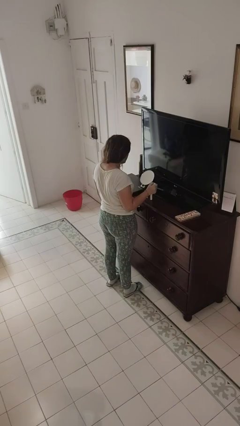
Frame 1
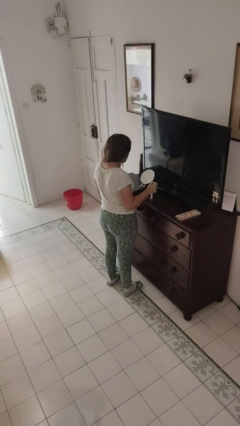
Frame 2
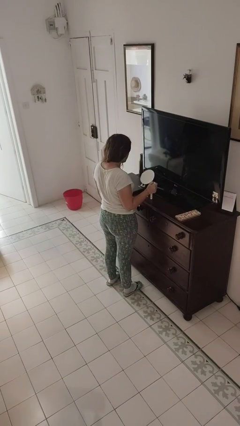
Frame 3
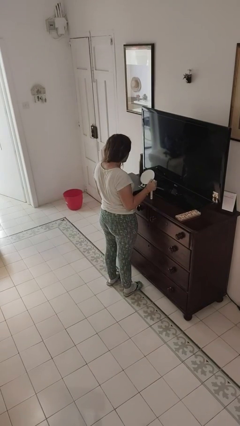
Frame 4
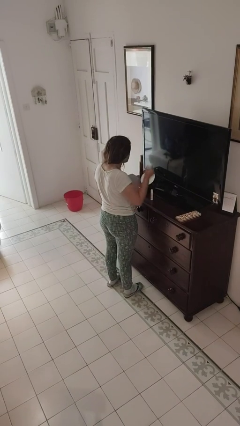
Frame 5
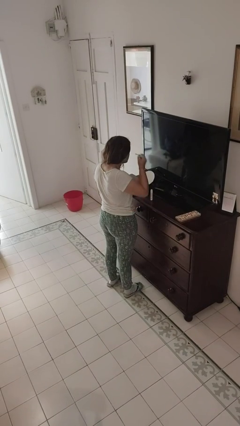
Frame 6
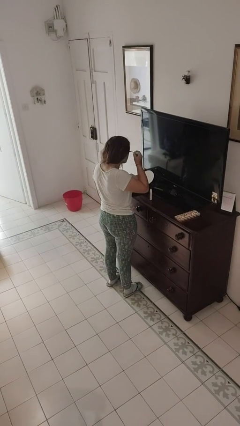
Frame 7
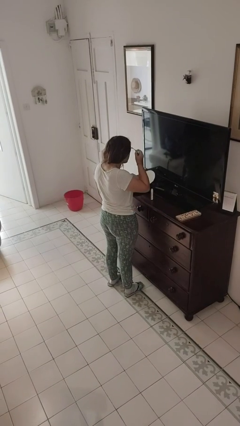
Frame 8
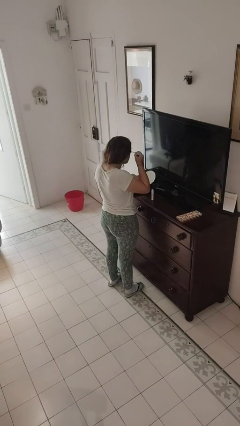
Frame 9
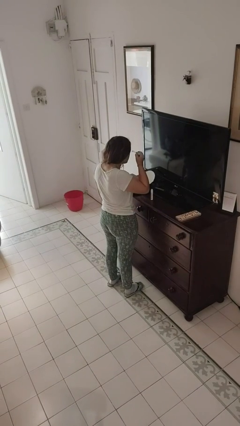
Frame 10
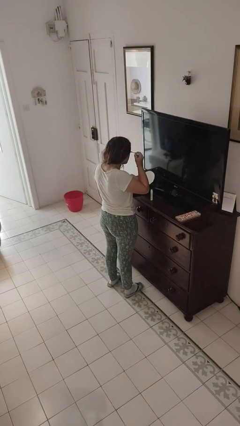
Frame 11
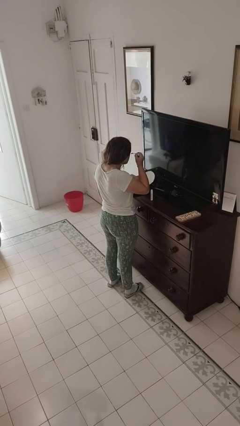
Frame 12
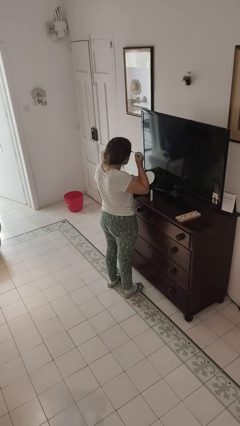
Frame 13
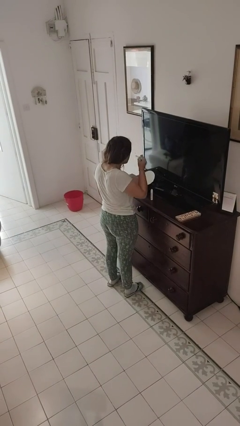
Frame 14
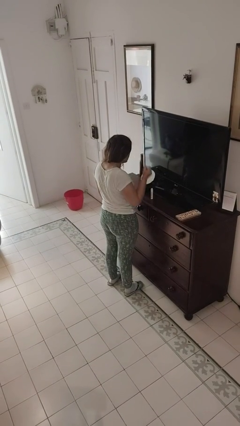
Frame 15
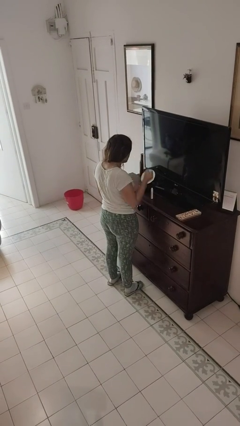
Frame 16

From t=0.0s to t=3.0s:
person applies eye makeup

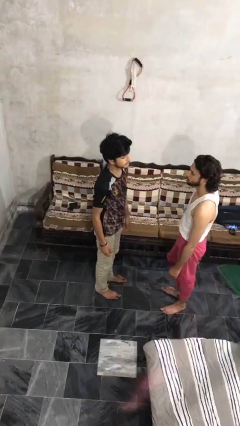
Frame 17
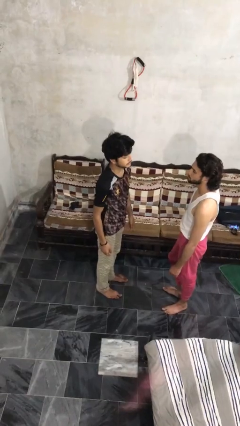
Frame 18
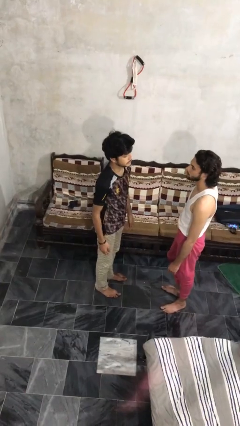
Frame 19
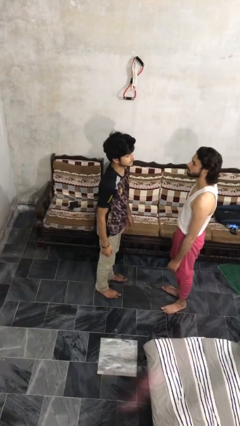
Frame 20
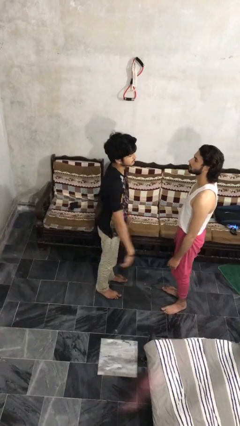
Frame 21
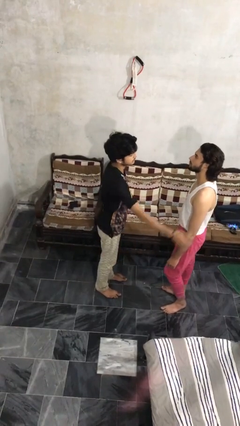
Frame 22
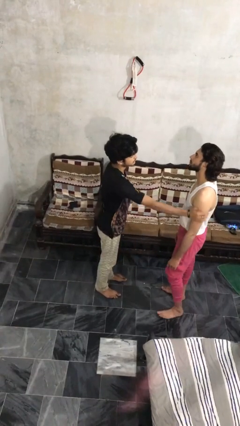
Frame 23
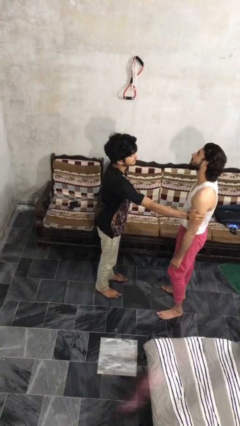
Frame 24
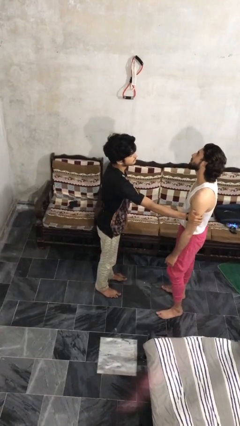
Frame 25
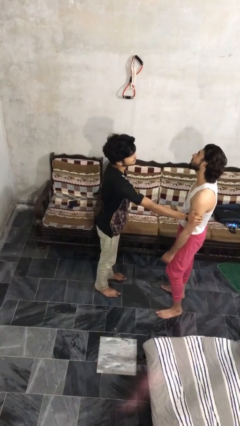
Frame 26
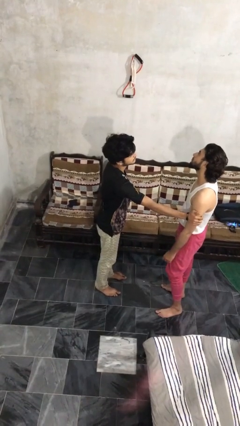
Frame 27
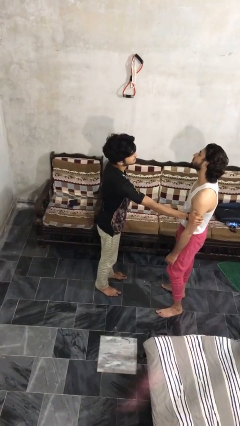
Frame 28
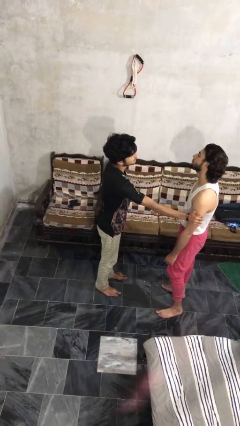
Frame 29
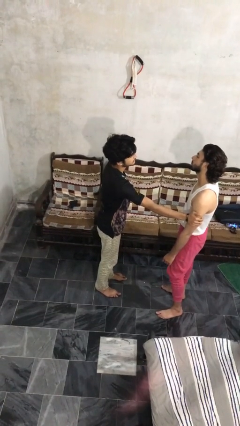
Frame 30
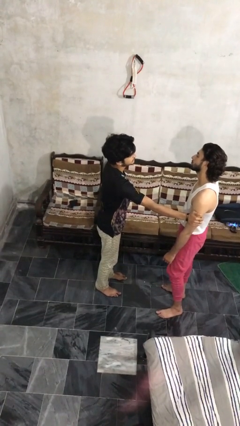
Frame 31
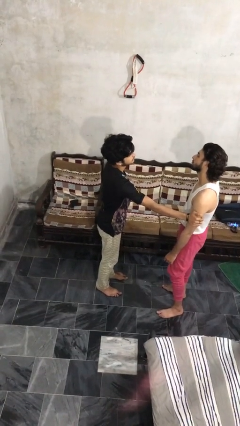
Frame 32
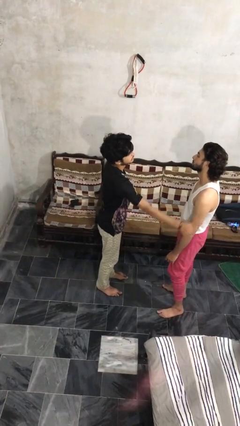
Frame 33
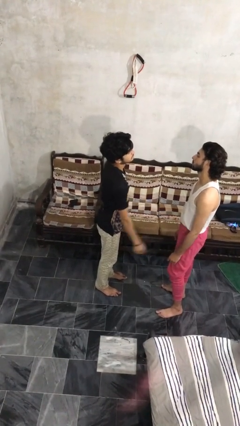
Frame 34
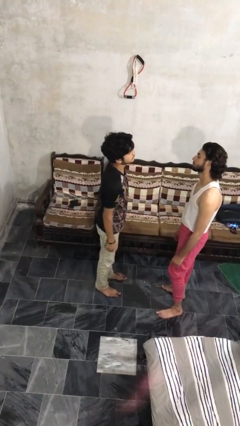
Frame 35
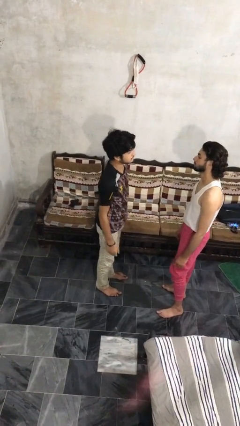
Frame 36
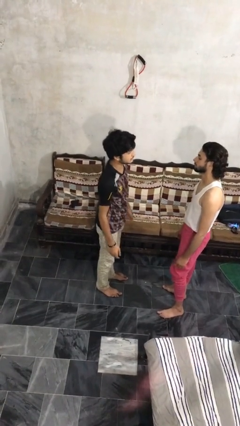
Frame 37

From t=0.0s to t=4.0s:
person grabs person by bicep

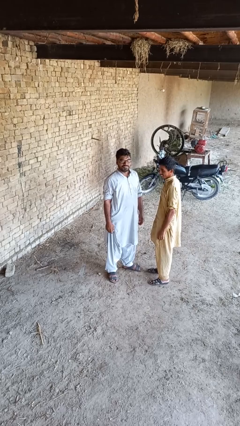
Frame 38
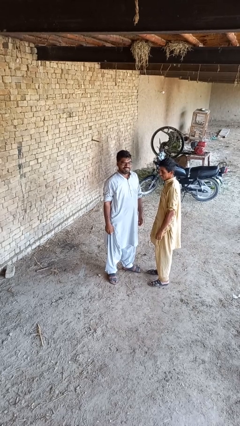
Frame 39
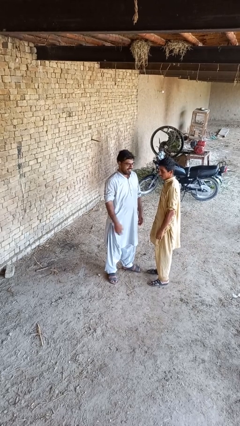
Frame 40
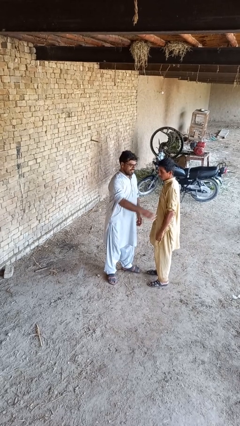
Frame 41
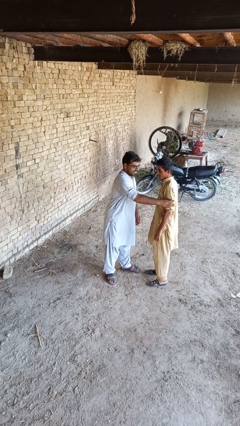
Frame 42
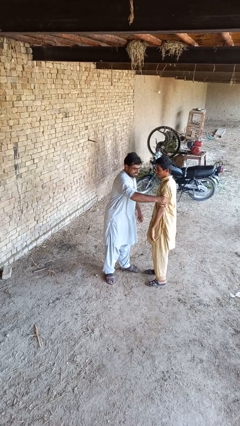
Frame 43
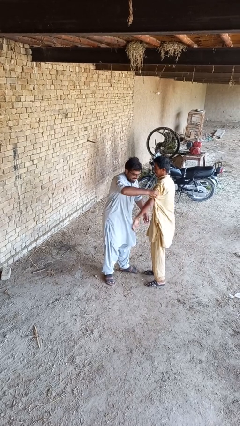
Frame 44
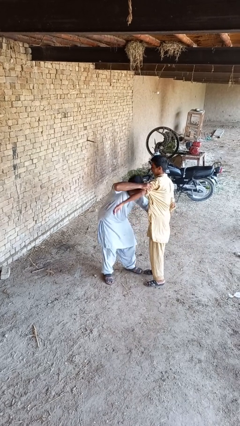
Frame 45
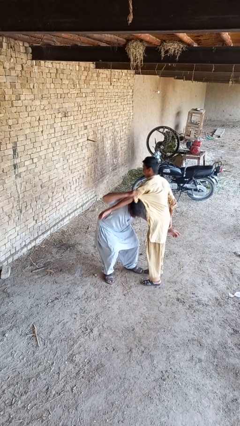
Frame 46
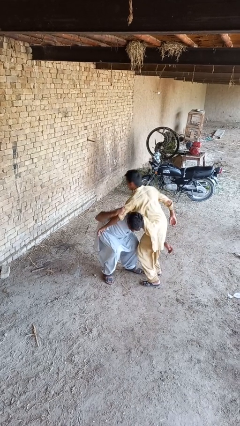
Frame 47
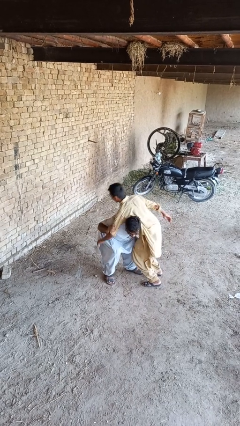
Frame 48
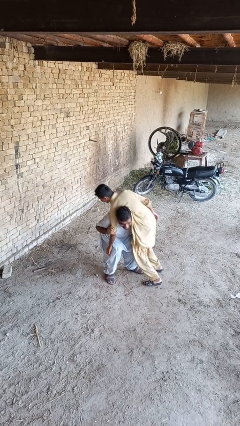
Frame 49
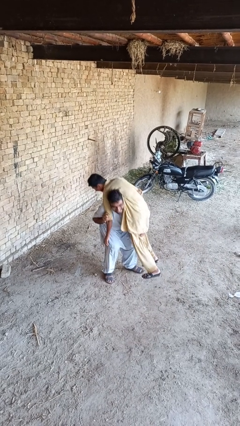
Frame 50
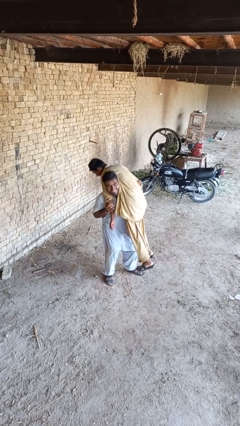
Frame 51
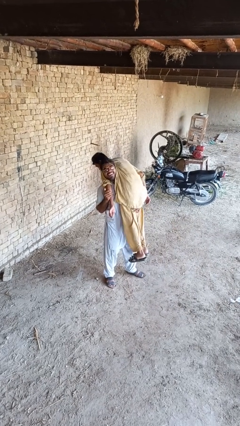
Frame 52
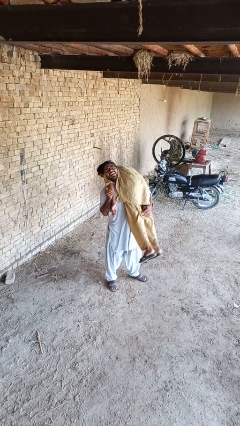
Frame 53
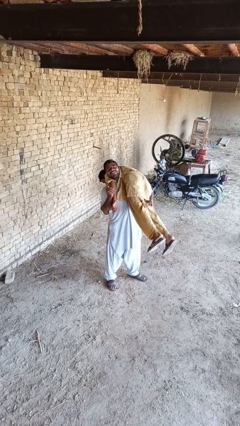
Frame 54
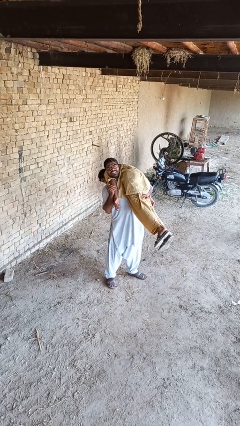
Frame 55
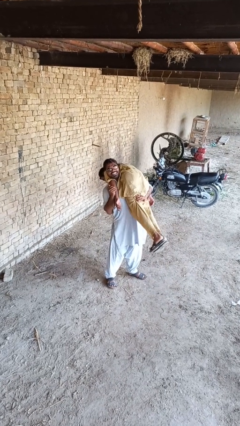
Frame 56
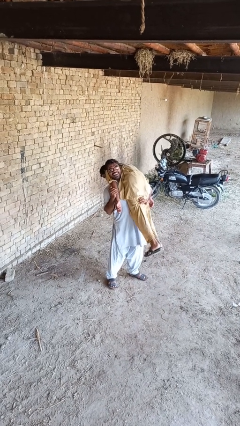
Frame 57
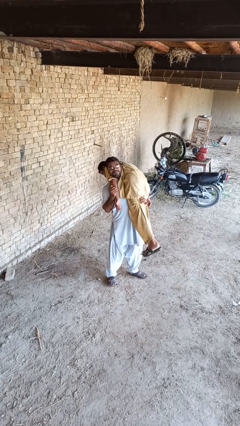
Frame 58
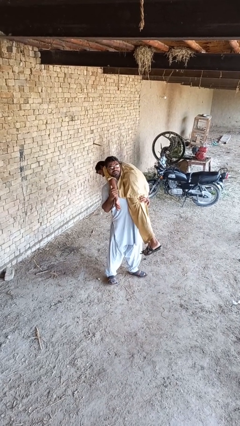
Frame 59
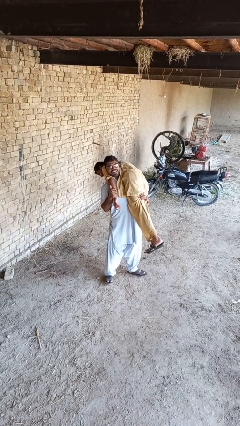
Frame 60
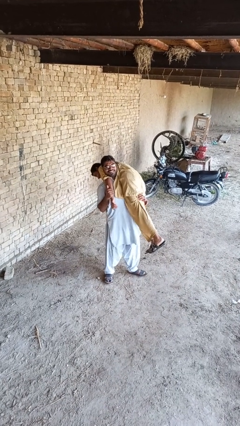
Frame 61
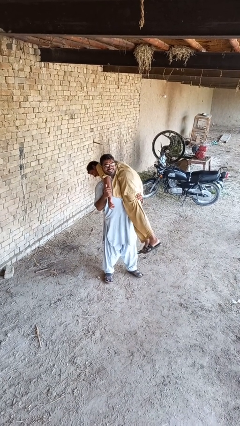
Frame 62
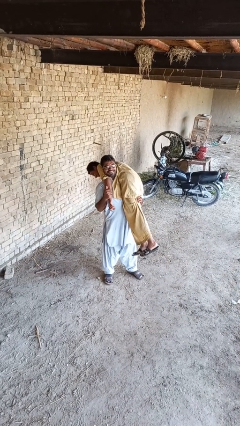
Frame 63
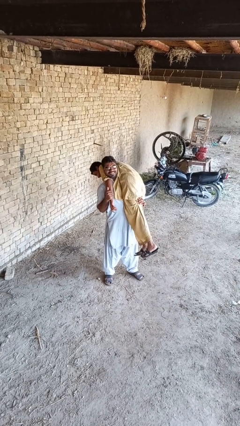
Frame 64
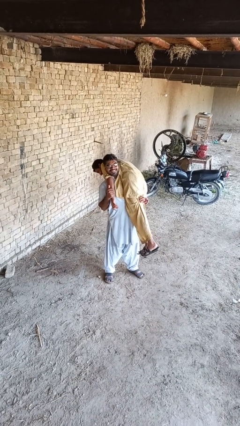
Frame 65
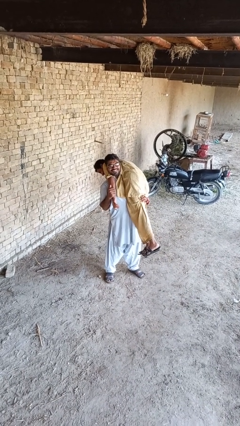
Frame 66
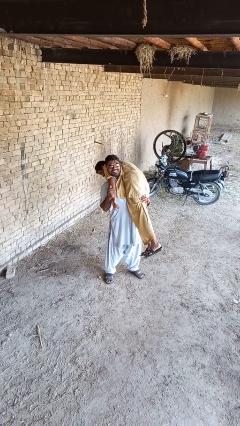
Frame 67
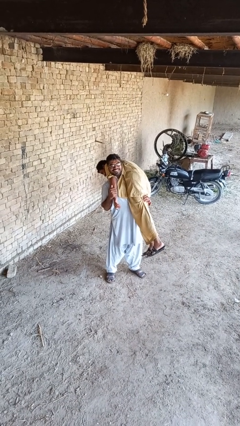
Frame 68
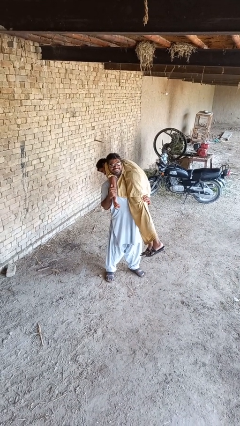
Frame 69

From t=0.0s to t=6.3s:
person carries person over shoulder

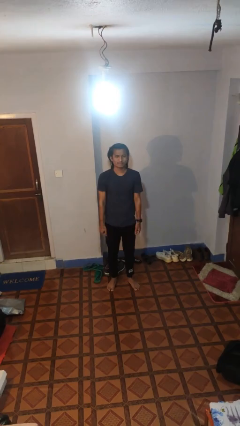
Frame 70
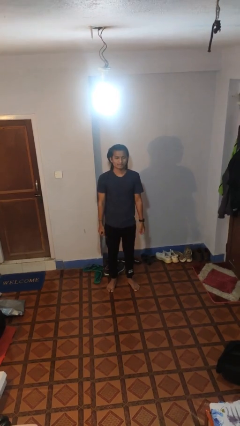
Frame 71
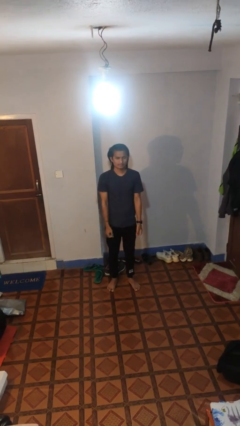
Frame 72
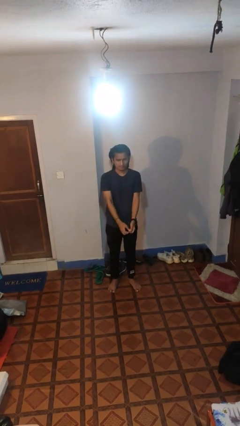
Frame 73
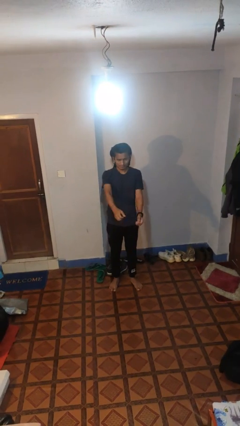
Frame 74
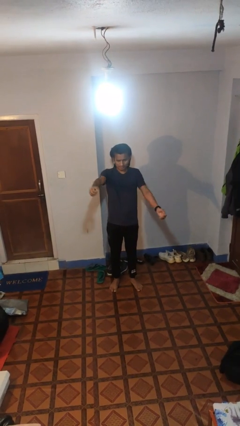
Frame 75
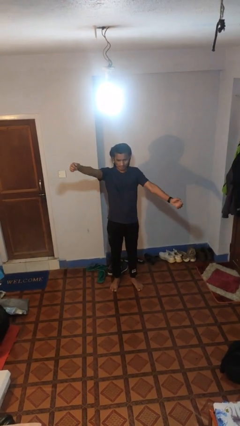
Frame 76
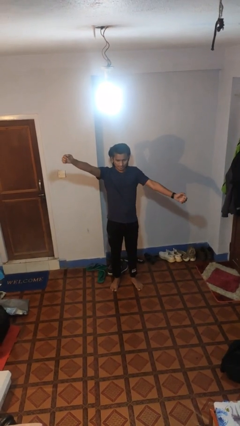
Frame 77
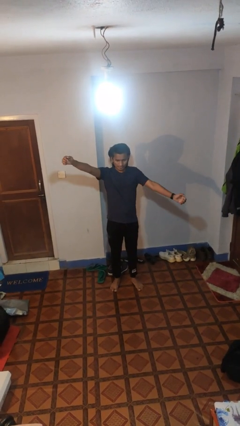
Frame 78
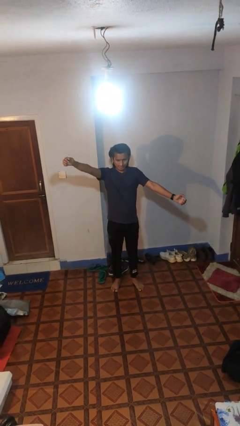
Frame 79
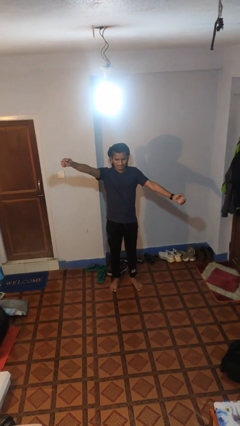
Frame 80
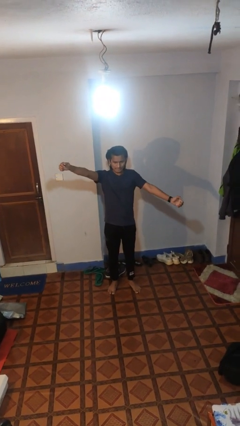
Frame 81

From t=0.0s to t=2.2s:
person gestures zoom in

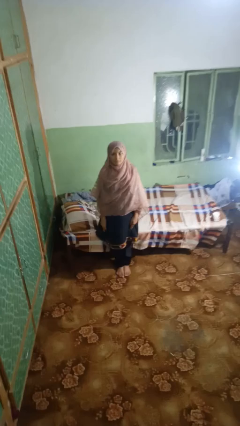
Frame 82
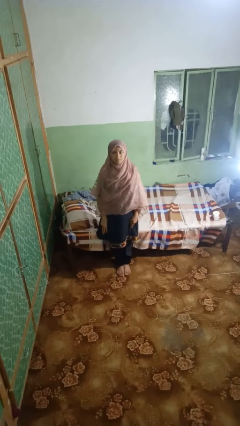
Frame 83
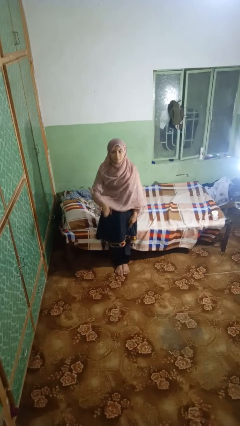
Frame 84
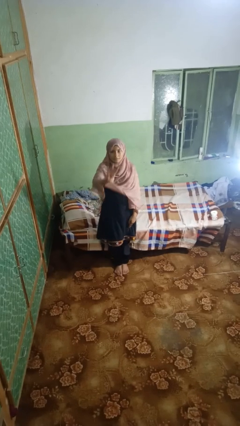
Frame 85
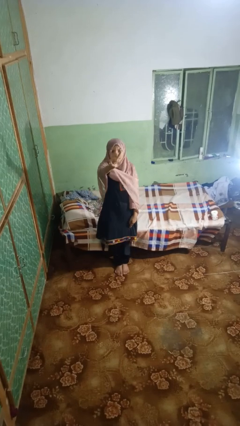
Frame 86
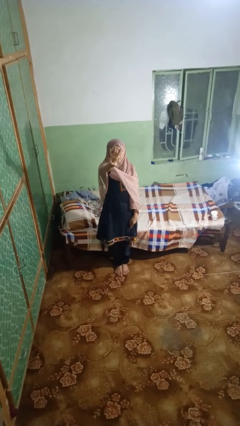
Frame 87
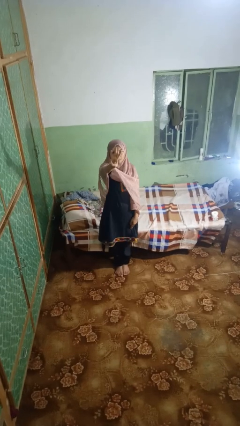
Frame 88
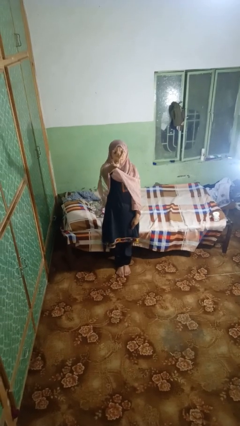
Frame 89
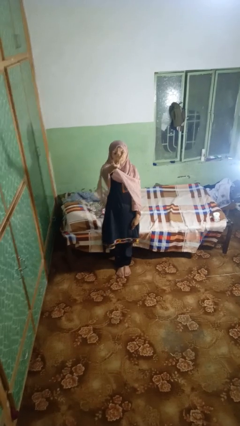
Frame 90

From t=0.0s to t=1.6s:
person gestures number three

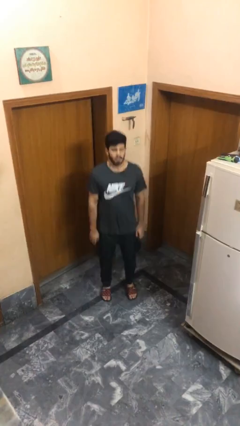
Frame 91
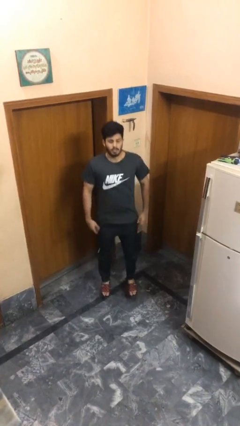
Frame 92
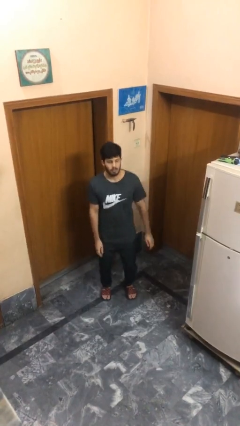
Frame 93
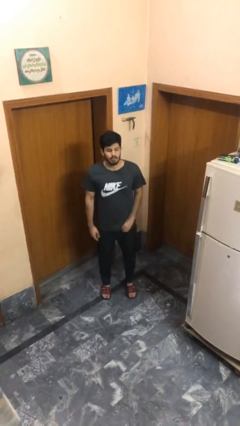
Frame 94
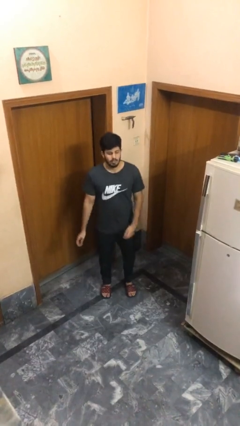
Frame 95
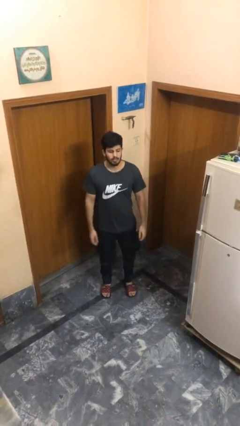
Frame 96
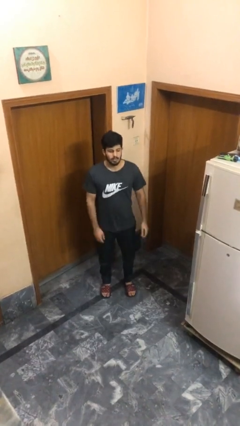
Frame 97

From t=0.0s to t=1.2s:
person jumps
